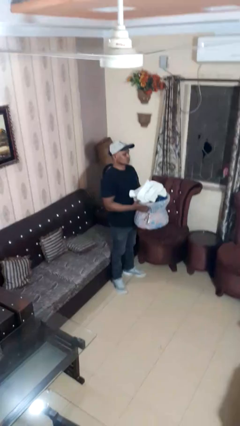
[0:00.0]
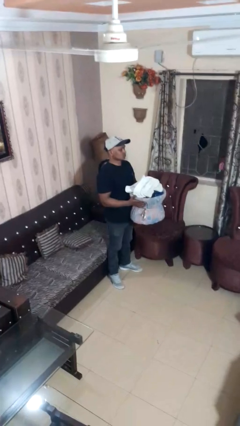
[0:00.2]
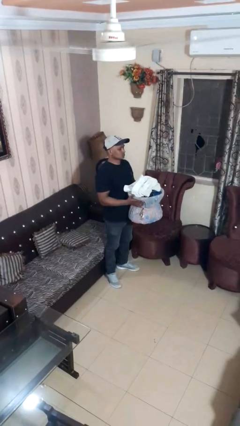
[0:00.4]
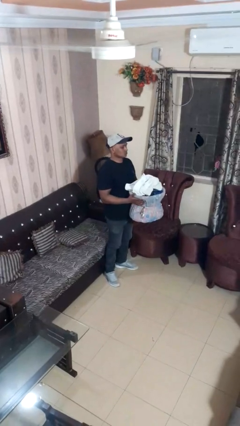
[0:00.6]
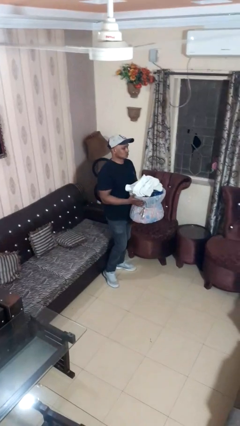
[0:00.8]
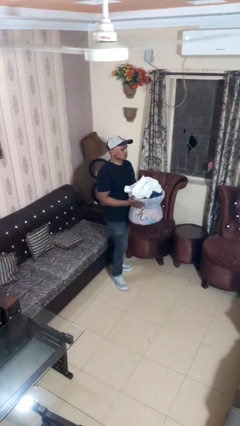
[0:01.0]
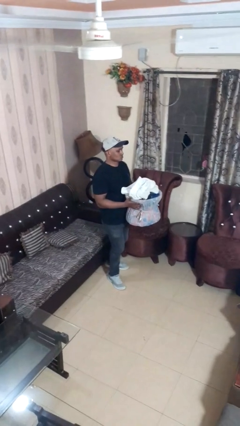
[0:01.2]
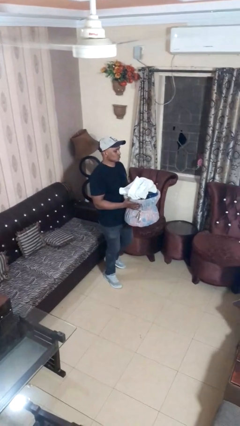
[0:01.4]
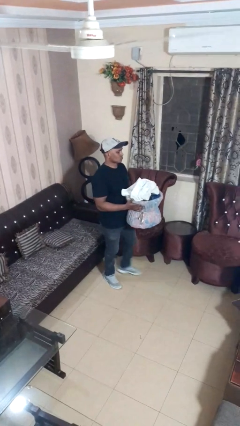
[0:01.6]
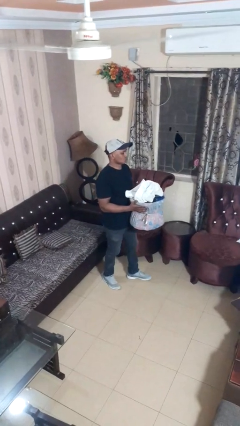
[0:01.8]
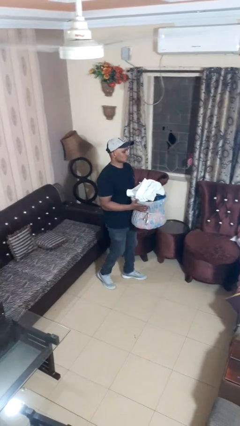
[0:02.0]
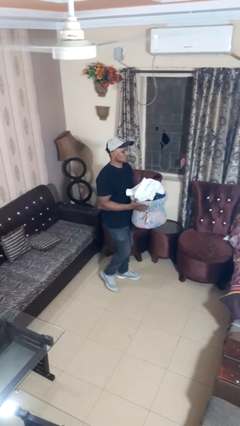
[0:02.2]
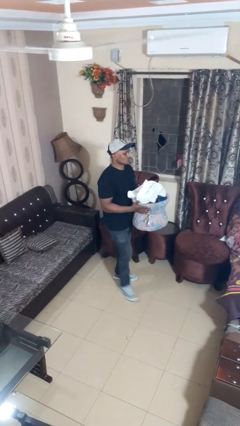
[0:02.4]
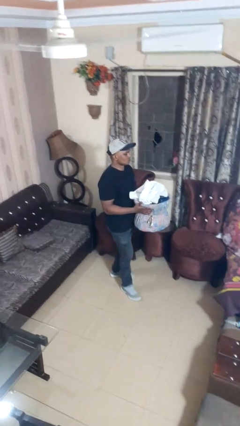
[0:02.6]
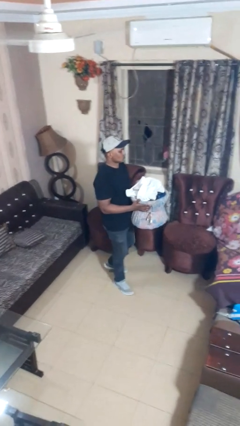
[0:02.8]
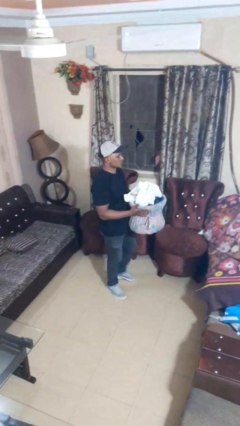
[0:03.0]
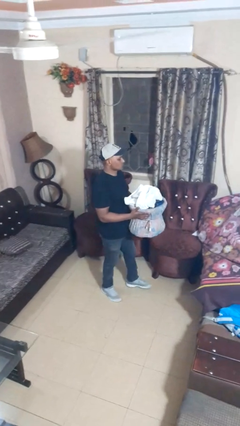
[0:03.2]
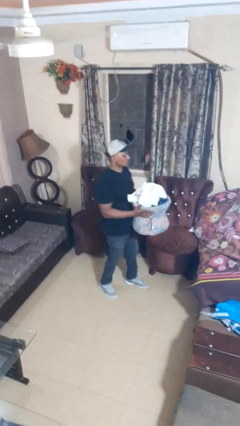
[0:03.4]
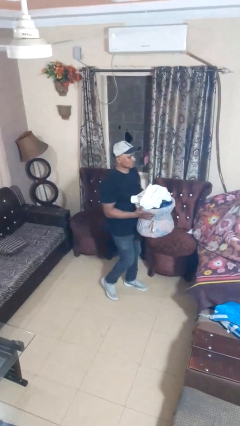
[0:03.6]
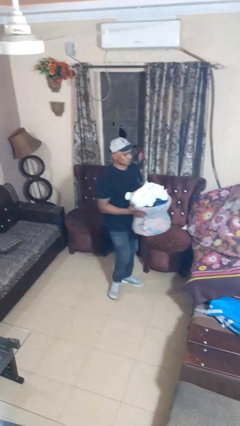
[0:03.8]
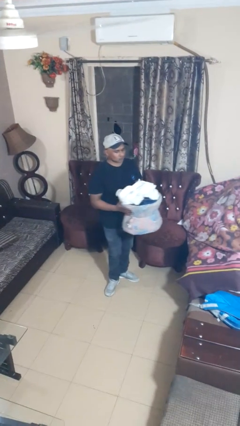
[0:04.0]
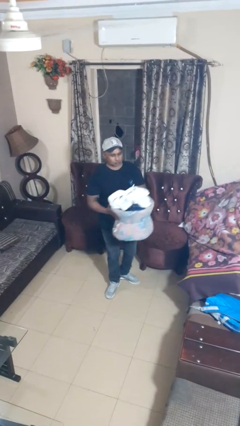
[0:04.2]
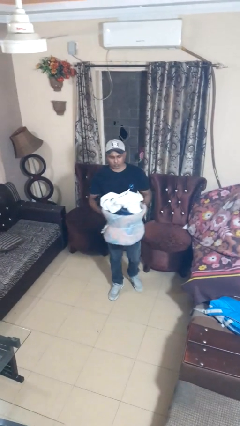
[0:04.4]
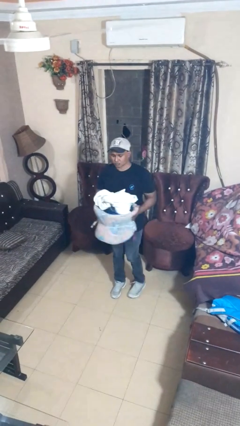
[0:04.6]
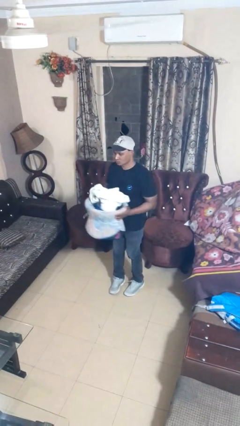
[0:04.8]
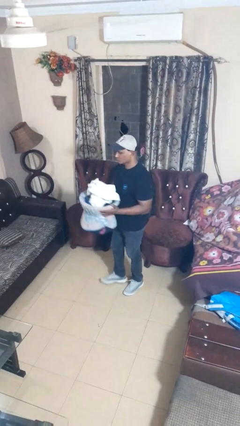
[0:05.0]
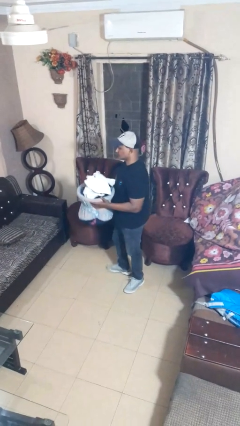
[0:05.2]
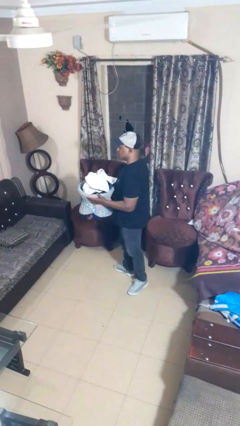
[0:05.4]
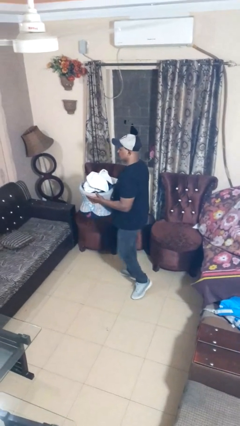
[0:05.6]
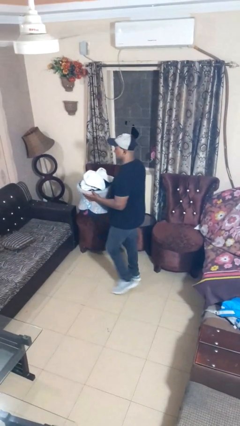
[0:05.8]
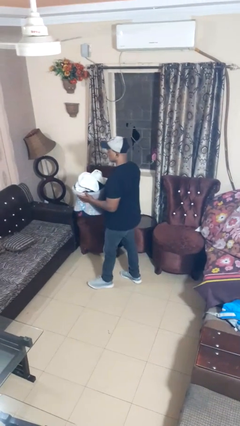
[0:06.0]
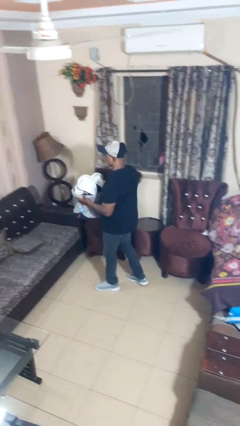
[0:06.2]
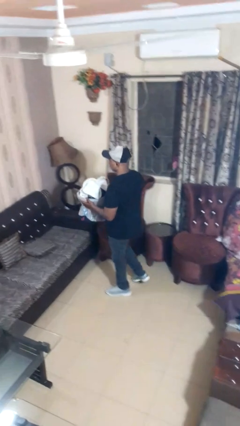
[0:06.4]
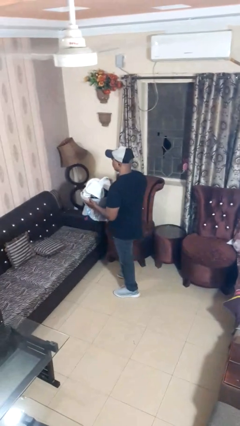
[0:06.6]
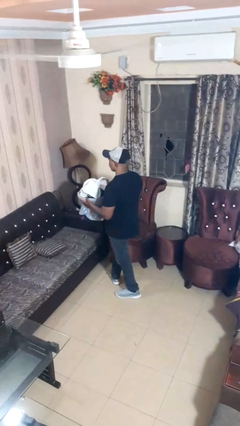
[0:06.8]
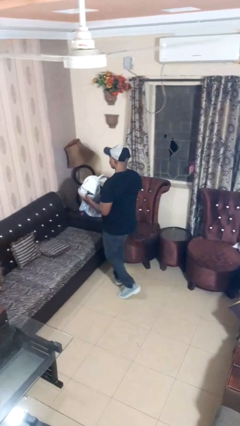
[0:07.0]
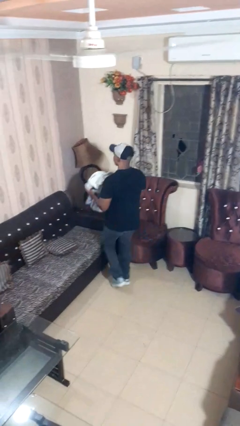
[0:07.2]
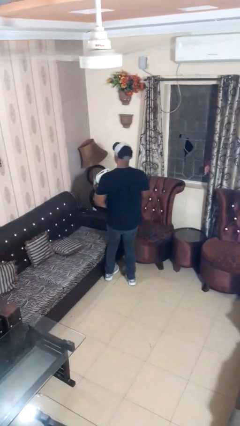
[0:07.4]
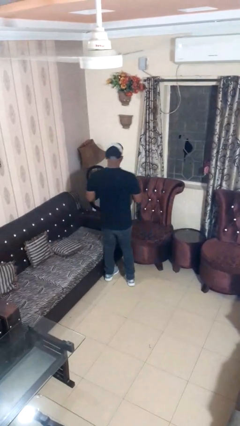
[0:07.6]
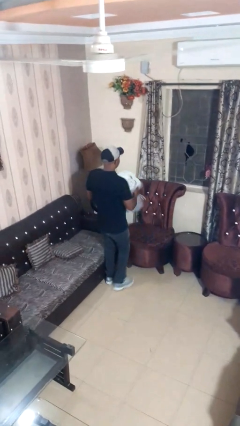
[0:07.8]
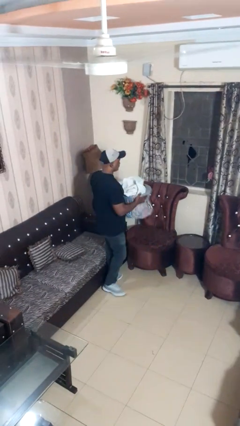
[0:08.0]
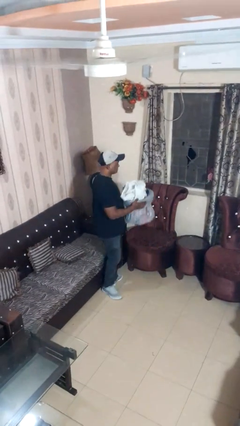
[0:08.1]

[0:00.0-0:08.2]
person carries laundry basket

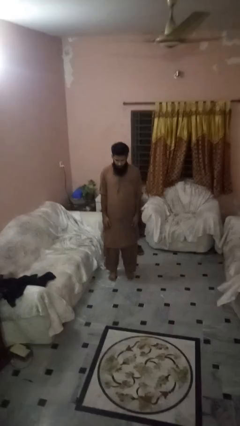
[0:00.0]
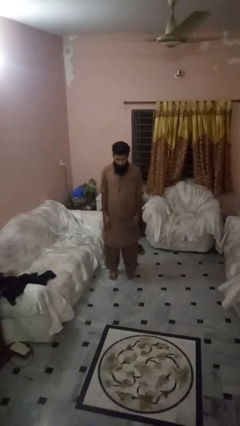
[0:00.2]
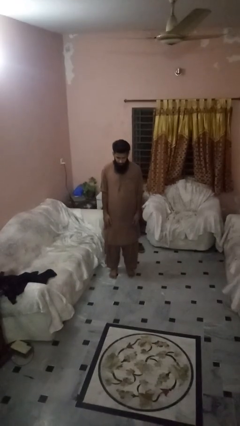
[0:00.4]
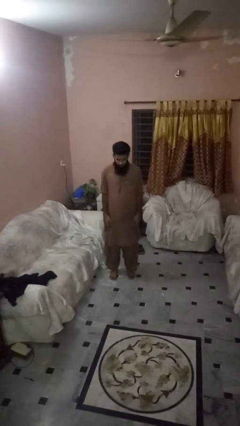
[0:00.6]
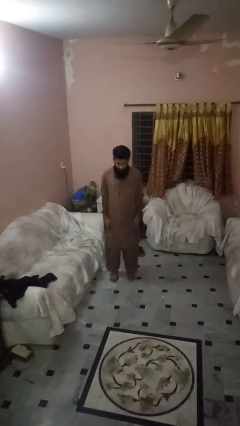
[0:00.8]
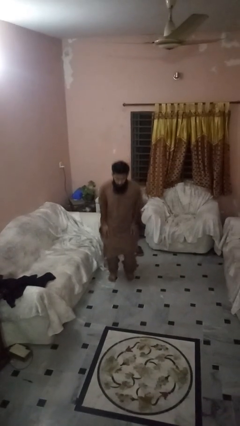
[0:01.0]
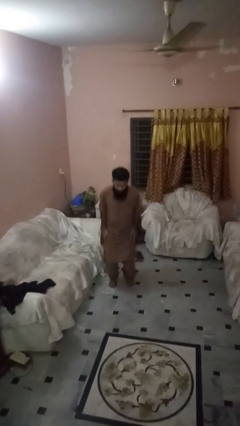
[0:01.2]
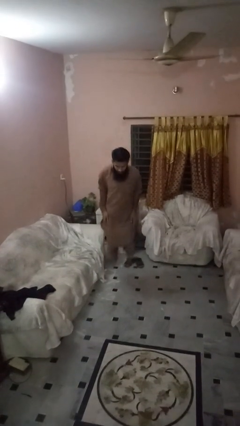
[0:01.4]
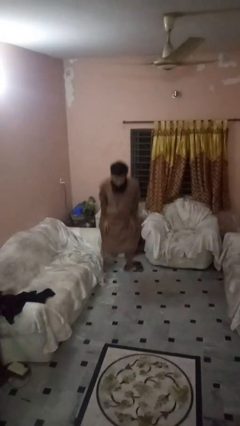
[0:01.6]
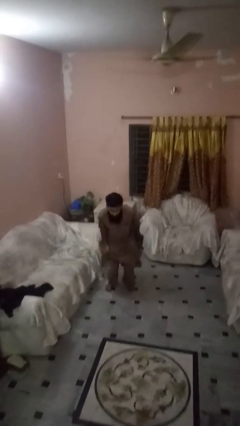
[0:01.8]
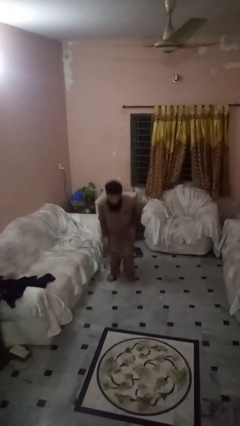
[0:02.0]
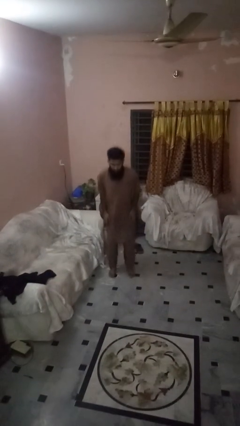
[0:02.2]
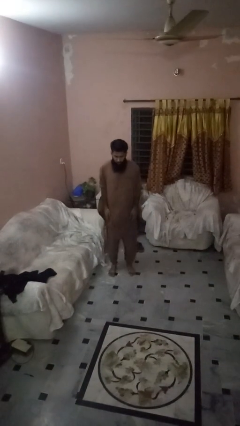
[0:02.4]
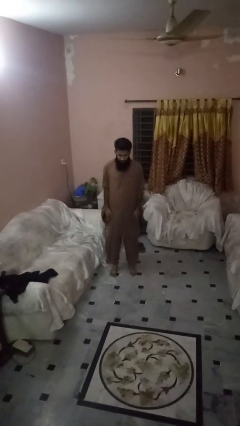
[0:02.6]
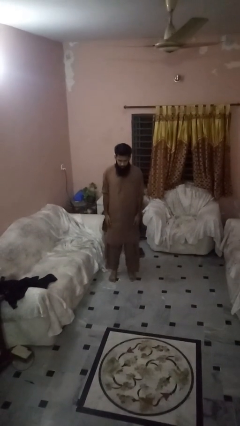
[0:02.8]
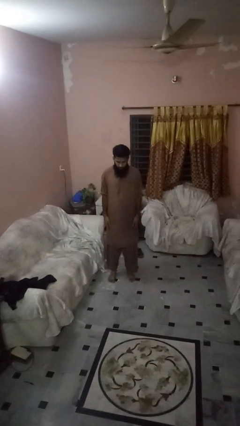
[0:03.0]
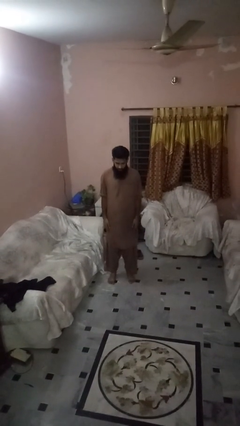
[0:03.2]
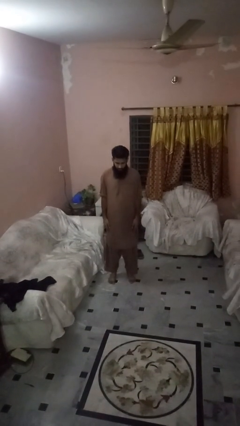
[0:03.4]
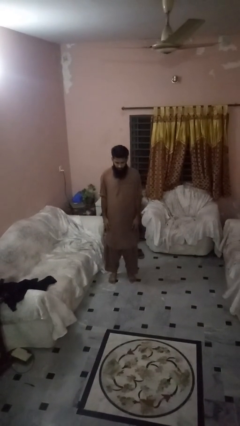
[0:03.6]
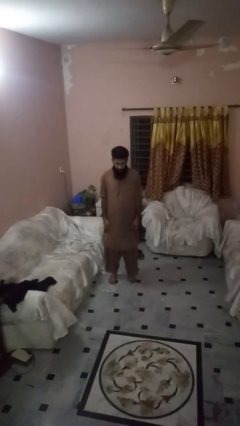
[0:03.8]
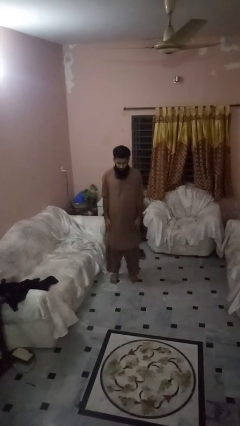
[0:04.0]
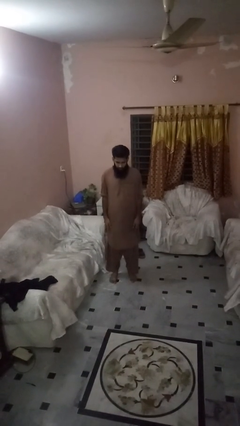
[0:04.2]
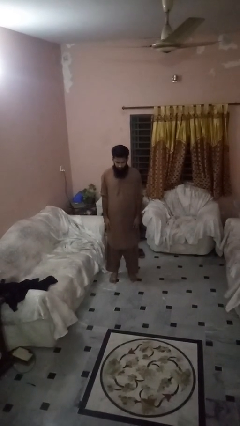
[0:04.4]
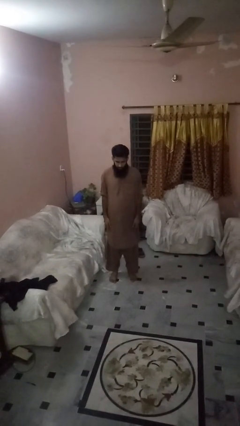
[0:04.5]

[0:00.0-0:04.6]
person jumps

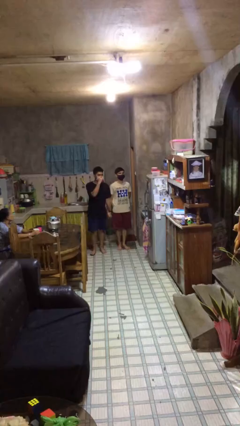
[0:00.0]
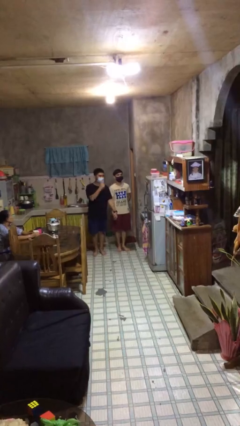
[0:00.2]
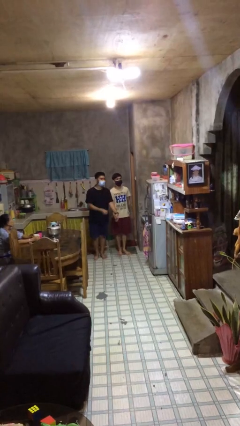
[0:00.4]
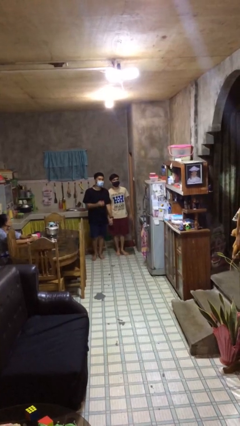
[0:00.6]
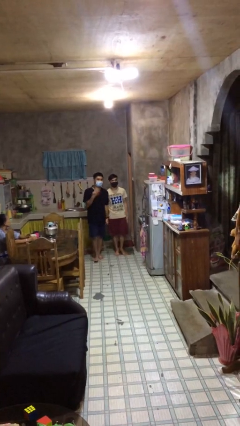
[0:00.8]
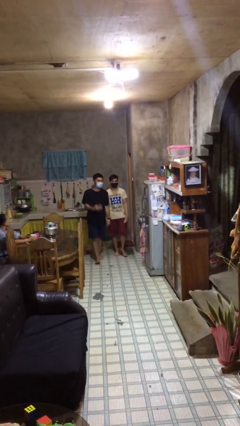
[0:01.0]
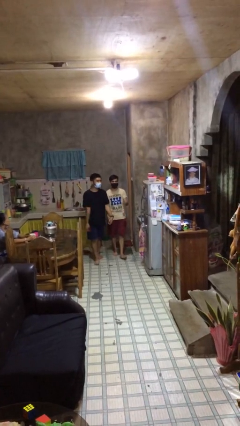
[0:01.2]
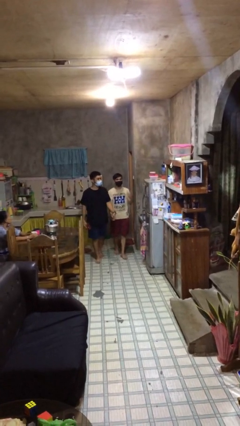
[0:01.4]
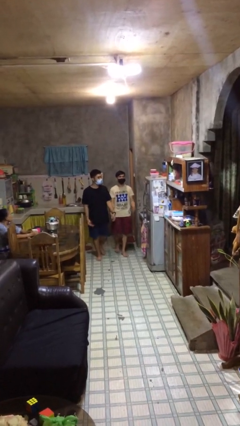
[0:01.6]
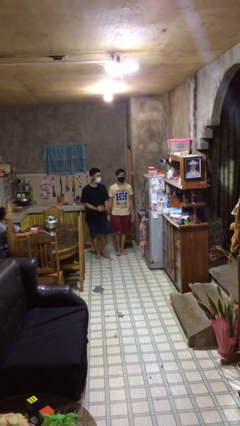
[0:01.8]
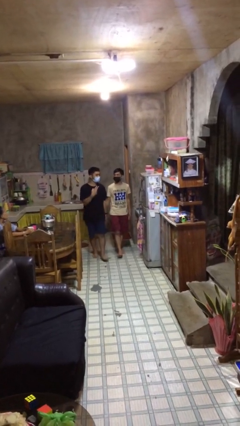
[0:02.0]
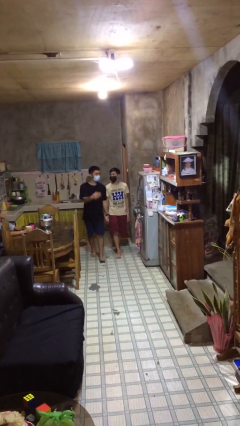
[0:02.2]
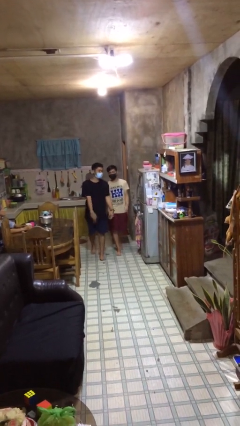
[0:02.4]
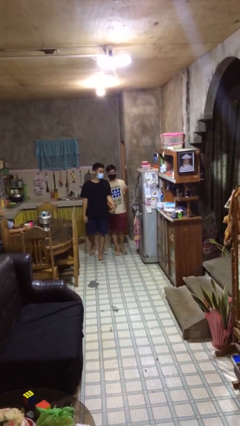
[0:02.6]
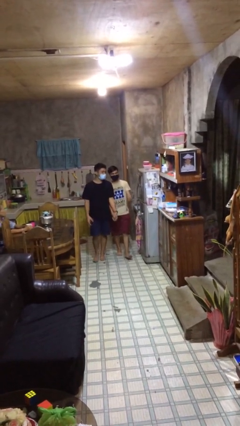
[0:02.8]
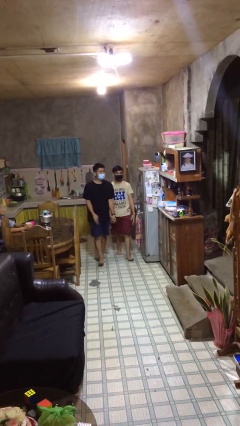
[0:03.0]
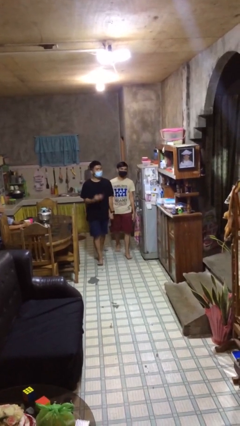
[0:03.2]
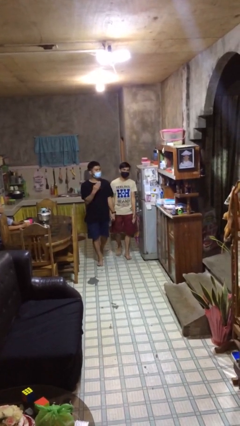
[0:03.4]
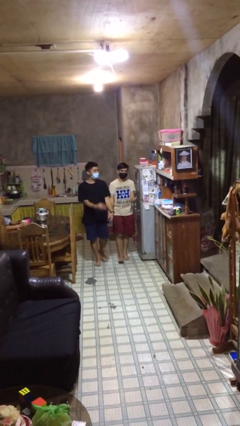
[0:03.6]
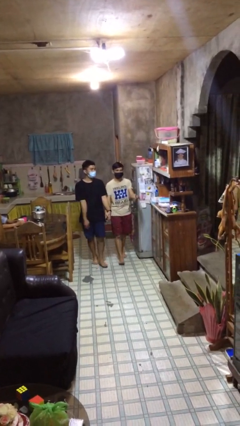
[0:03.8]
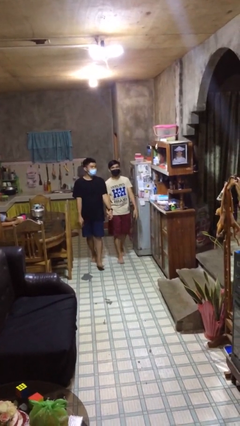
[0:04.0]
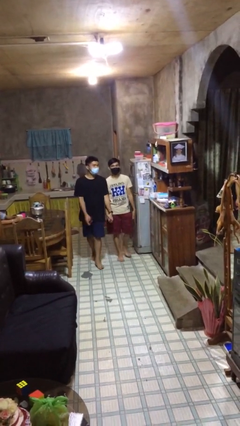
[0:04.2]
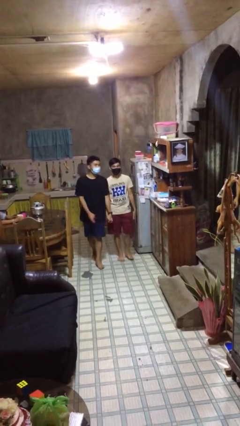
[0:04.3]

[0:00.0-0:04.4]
person talks to person

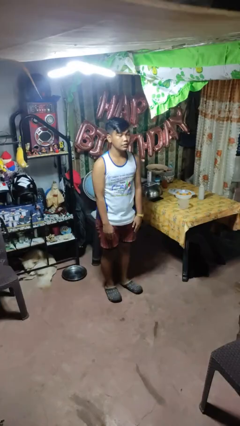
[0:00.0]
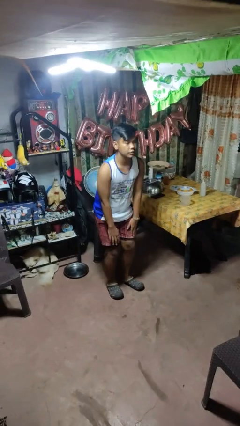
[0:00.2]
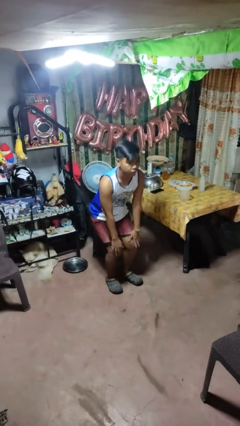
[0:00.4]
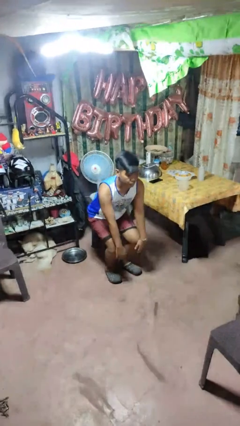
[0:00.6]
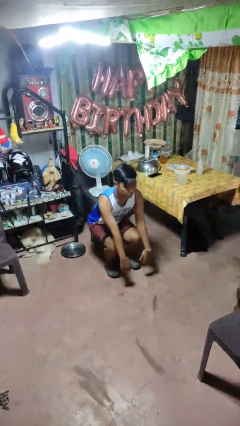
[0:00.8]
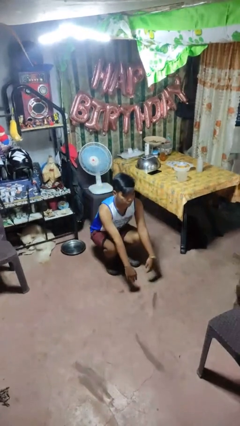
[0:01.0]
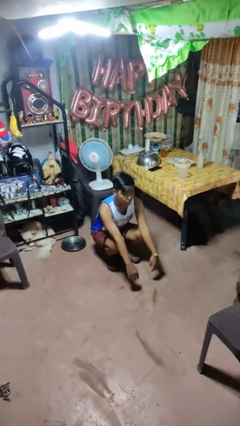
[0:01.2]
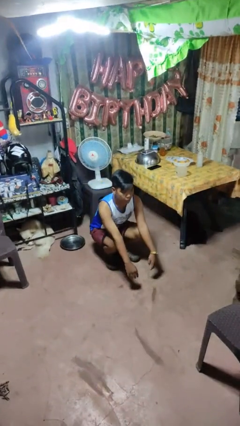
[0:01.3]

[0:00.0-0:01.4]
person squats
